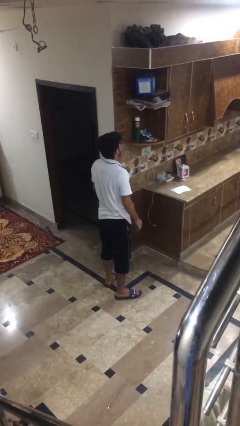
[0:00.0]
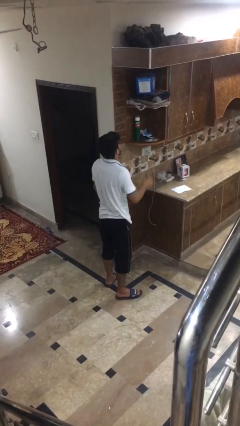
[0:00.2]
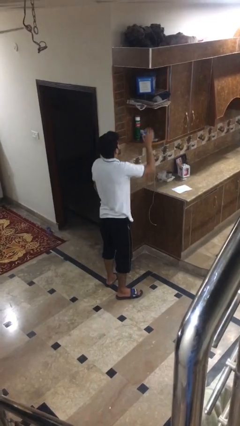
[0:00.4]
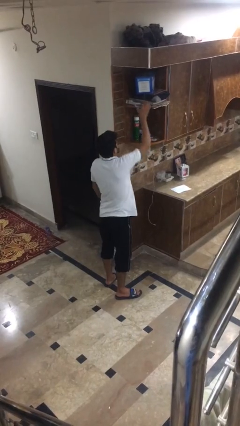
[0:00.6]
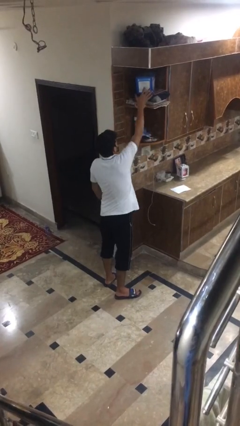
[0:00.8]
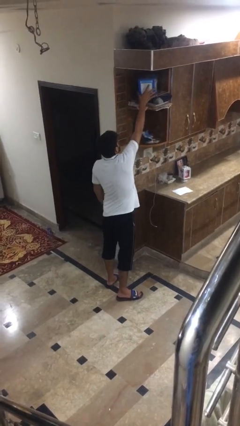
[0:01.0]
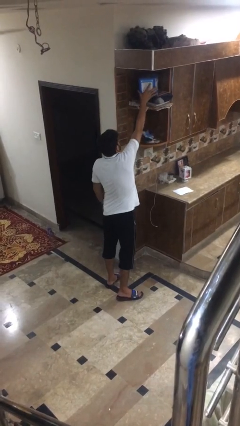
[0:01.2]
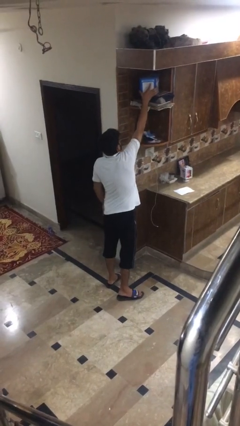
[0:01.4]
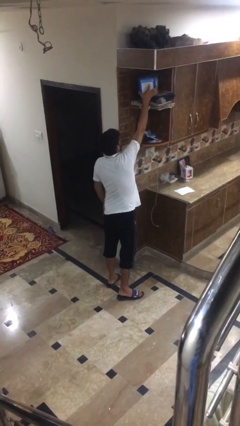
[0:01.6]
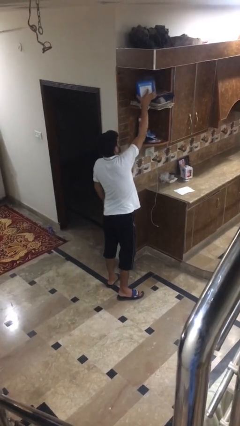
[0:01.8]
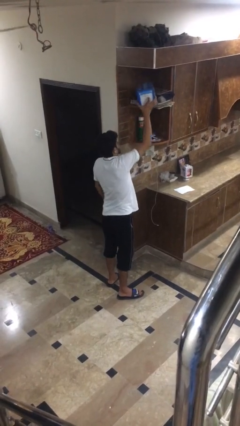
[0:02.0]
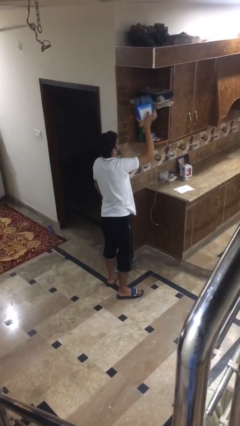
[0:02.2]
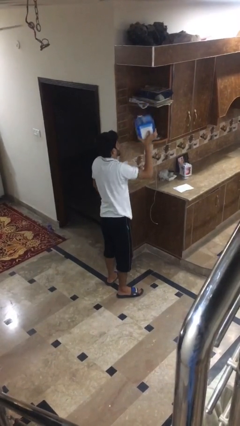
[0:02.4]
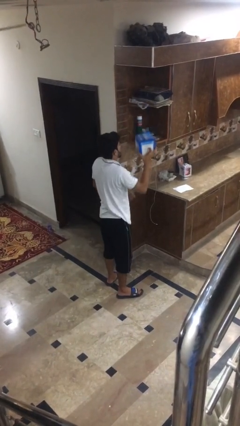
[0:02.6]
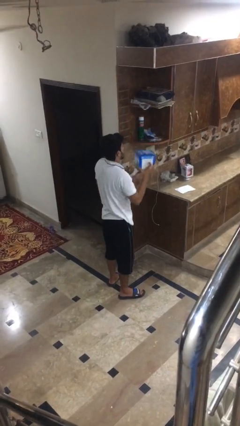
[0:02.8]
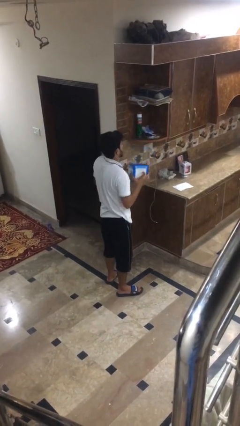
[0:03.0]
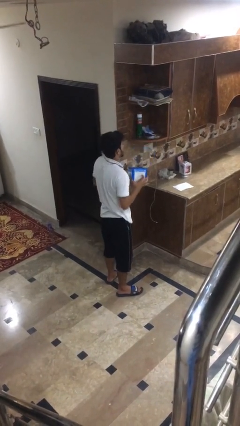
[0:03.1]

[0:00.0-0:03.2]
person puts down object on shelf

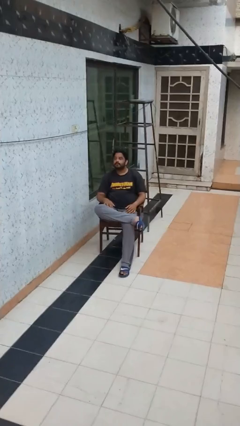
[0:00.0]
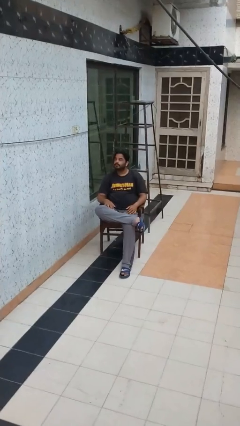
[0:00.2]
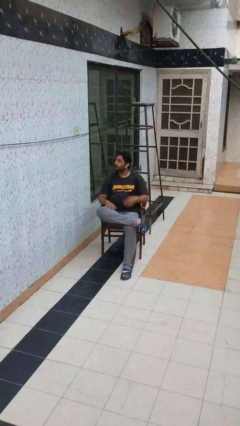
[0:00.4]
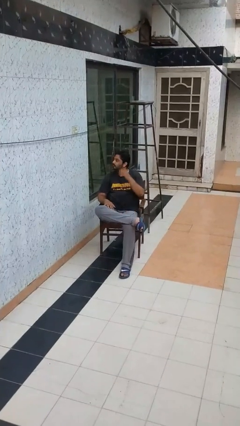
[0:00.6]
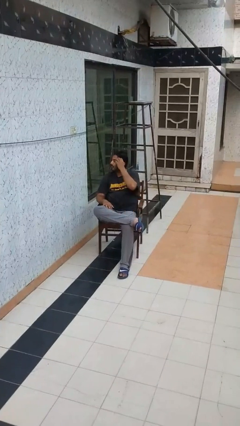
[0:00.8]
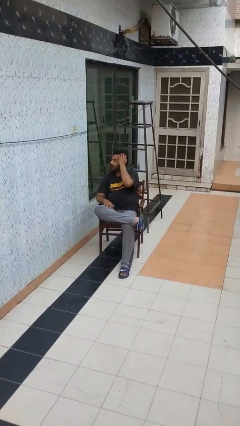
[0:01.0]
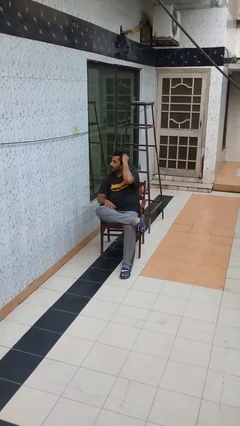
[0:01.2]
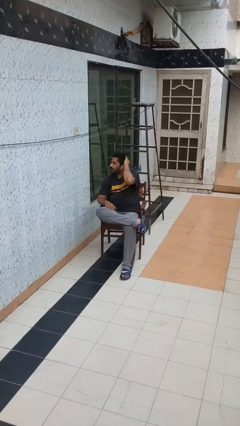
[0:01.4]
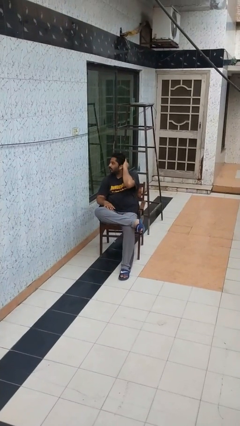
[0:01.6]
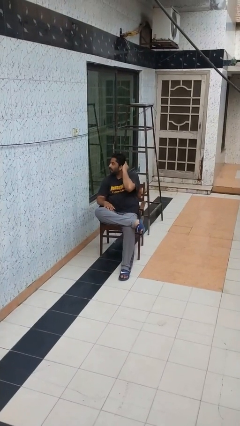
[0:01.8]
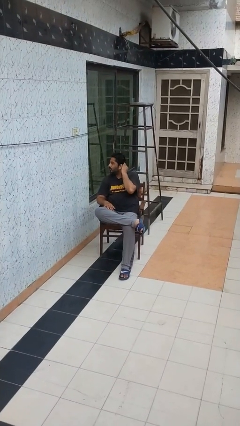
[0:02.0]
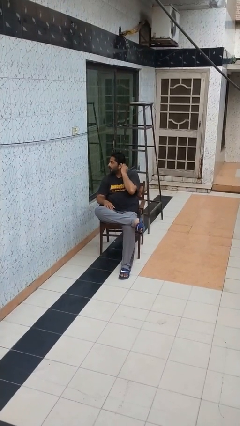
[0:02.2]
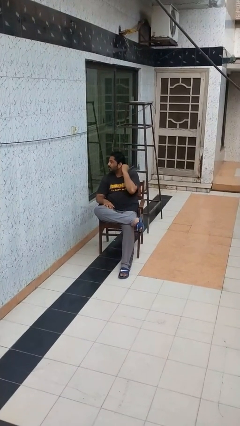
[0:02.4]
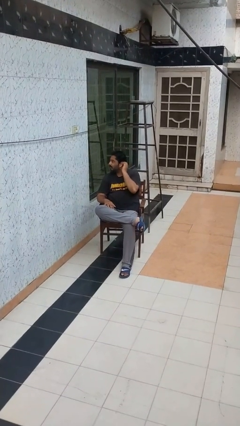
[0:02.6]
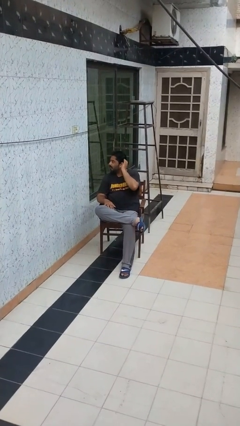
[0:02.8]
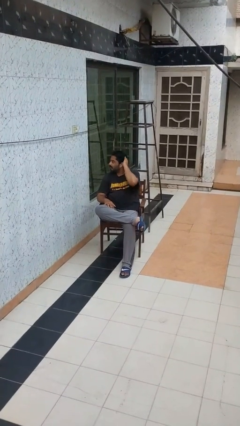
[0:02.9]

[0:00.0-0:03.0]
person strokes hair

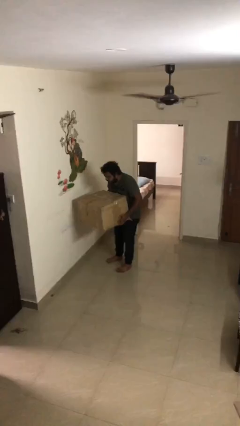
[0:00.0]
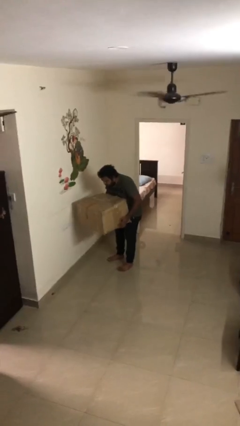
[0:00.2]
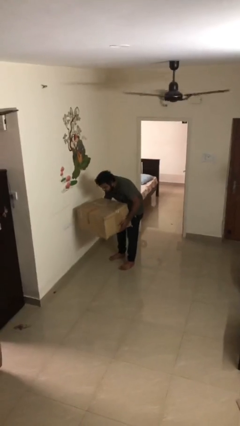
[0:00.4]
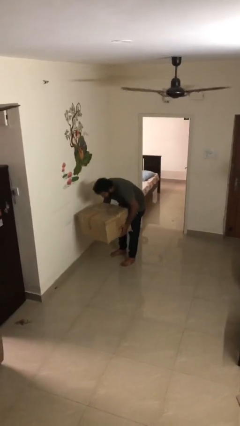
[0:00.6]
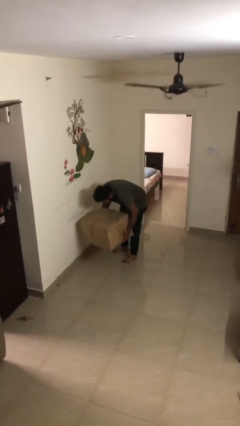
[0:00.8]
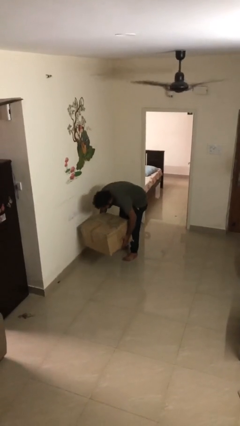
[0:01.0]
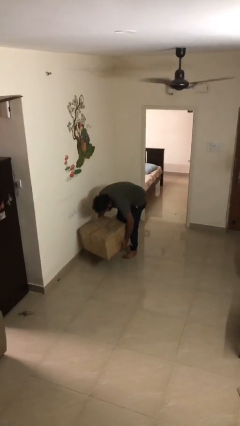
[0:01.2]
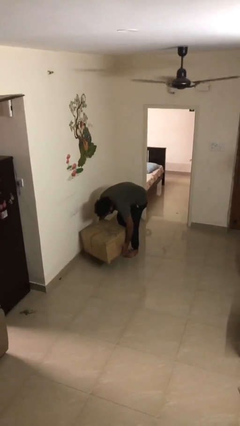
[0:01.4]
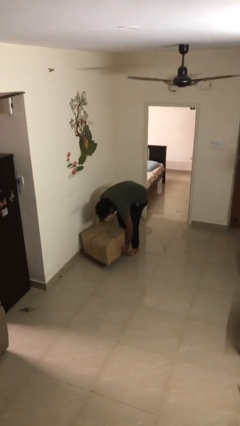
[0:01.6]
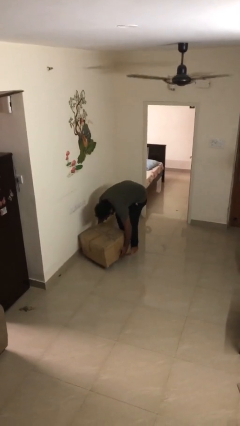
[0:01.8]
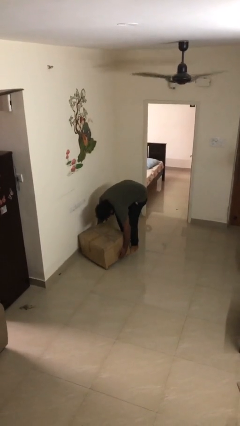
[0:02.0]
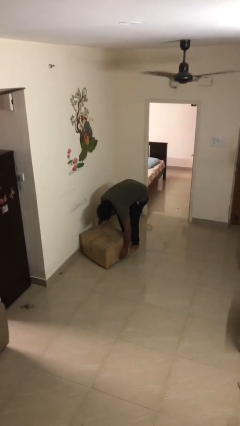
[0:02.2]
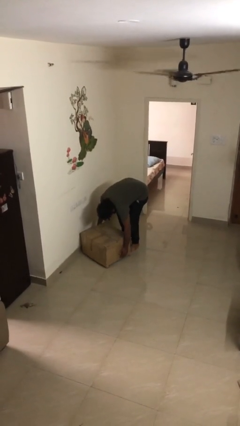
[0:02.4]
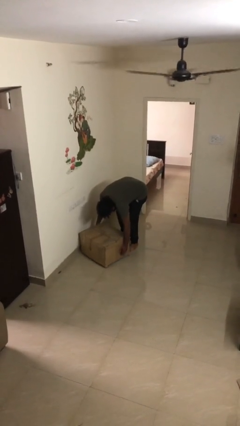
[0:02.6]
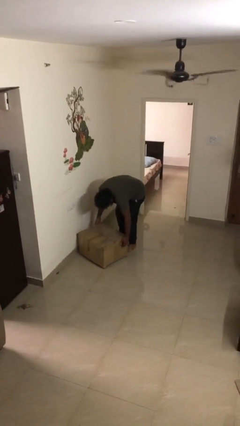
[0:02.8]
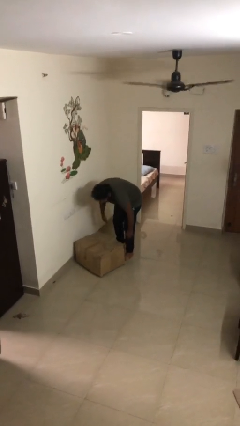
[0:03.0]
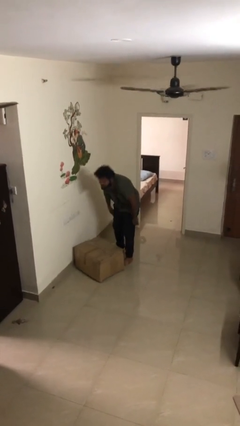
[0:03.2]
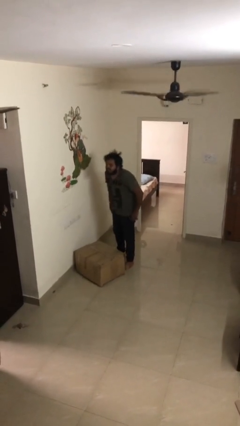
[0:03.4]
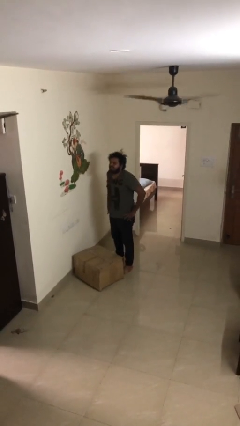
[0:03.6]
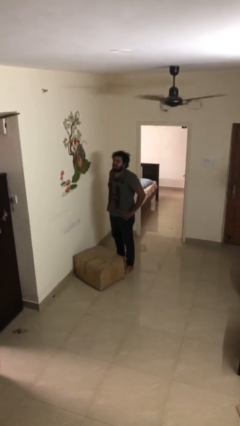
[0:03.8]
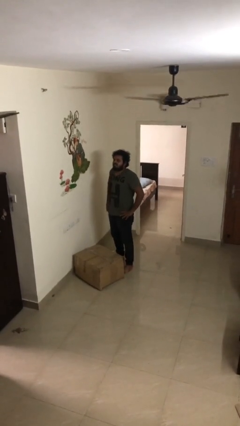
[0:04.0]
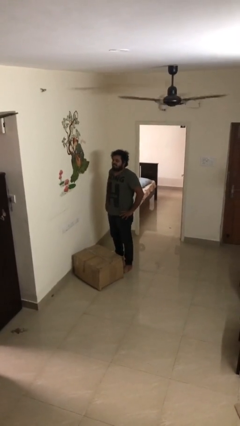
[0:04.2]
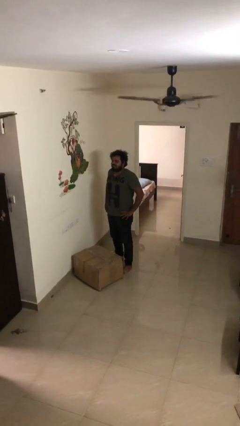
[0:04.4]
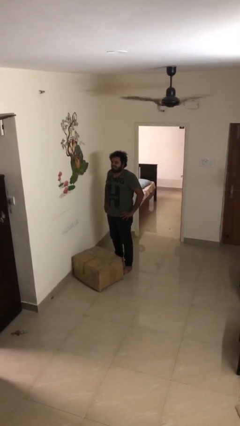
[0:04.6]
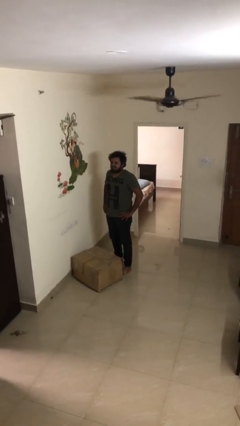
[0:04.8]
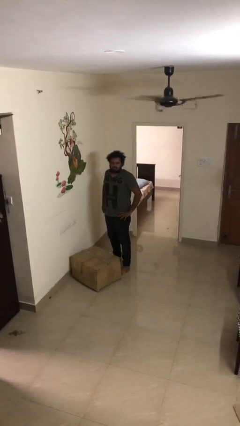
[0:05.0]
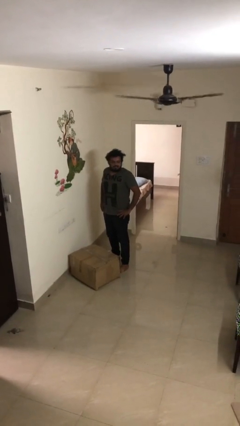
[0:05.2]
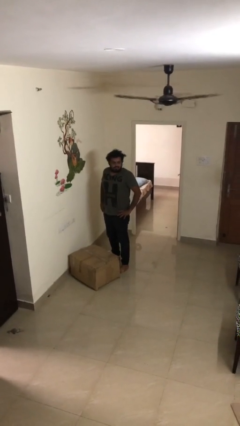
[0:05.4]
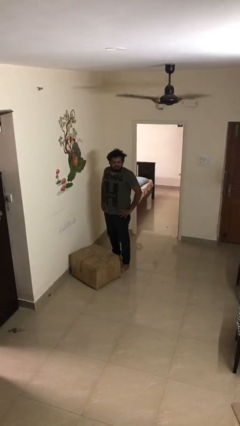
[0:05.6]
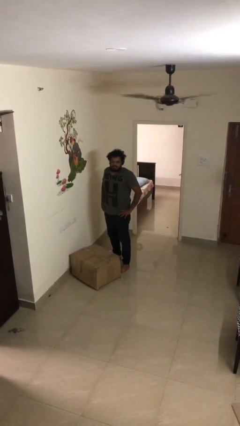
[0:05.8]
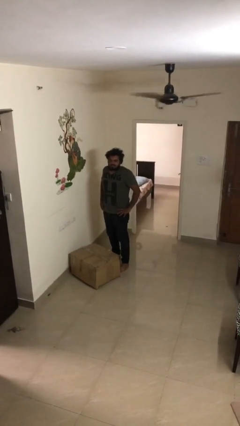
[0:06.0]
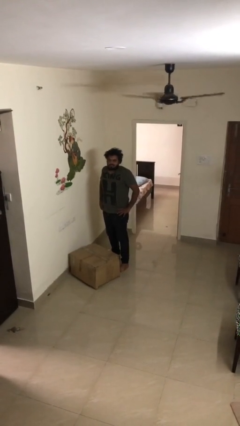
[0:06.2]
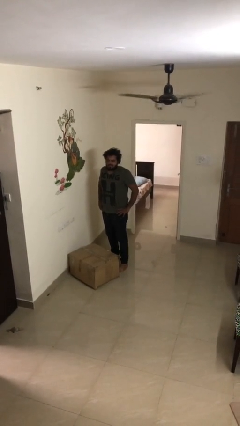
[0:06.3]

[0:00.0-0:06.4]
person puts down object on floor

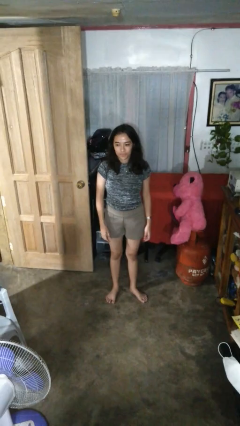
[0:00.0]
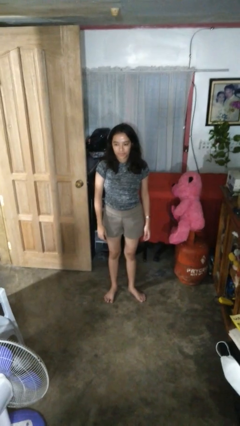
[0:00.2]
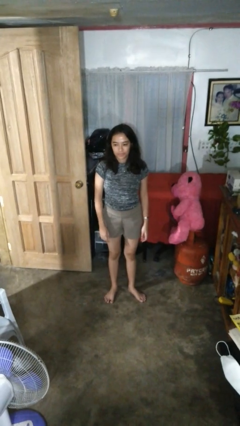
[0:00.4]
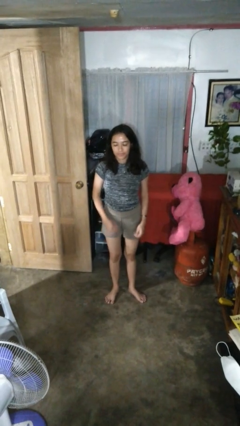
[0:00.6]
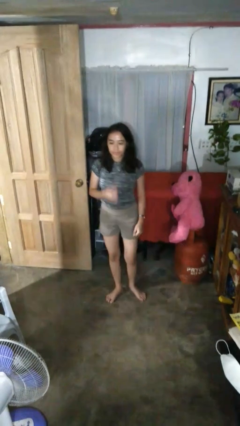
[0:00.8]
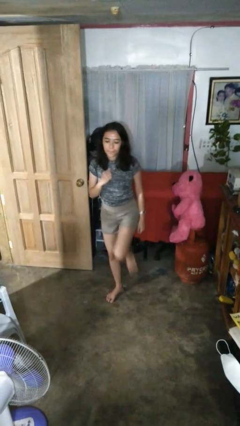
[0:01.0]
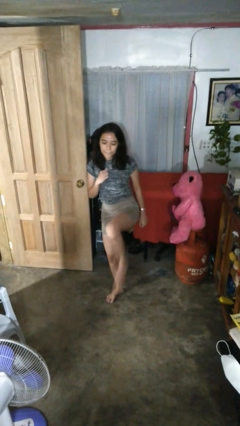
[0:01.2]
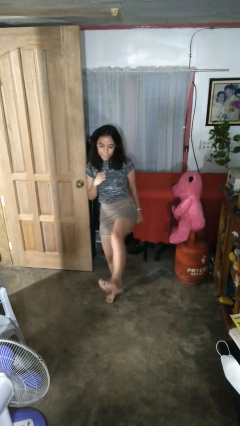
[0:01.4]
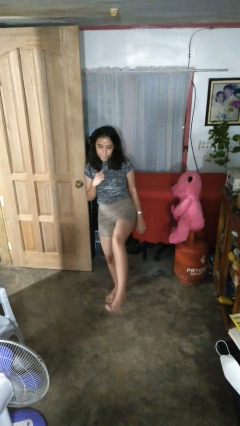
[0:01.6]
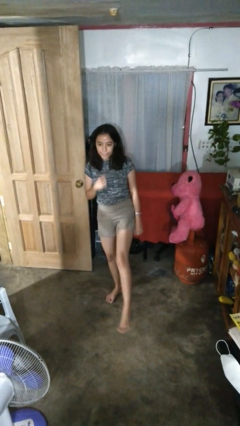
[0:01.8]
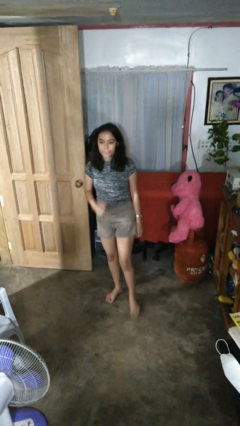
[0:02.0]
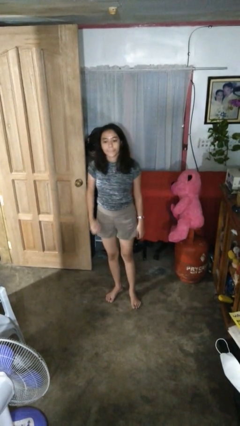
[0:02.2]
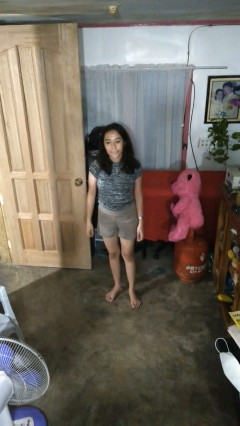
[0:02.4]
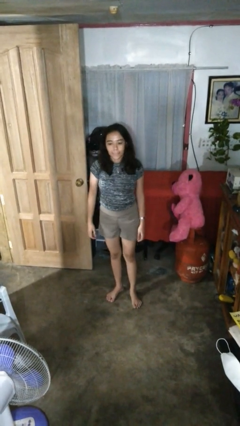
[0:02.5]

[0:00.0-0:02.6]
person karate kicks

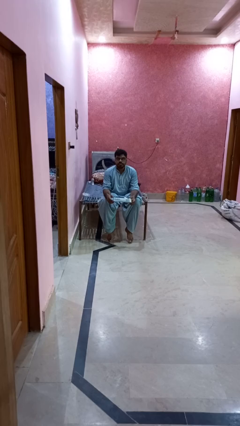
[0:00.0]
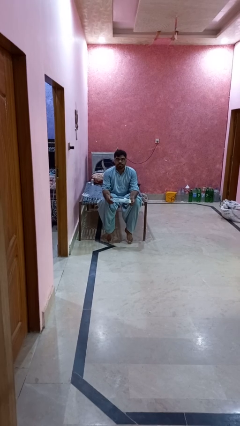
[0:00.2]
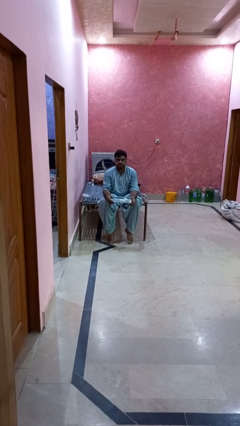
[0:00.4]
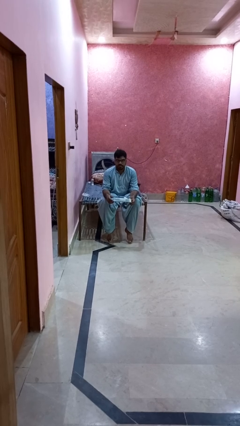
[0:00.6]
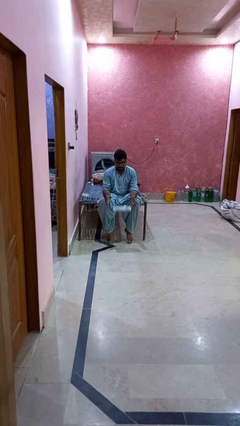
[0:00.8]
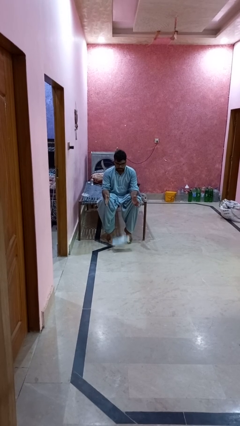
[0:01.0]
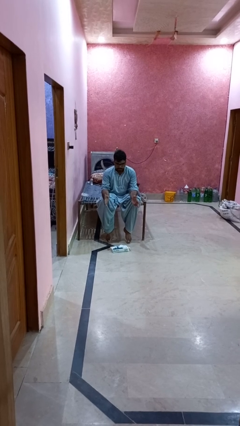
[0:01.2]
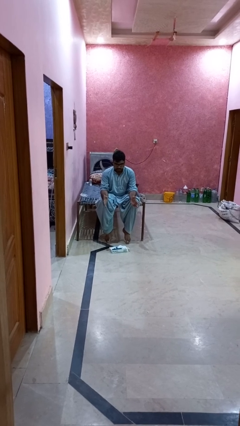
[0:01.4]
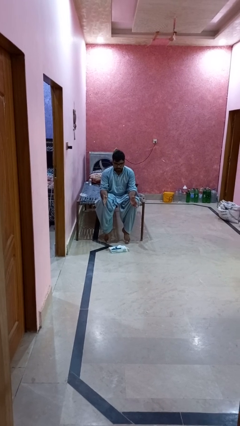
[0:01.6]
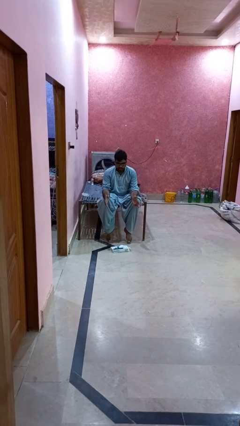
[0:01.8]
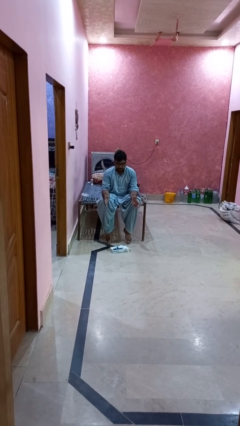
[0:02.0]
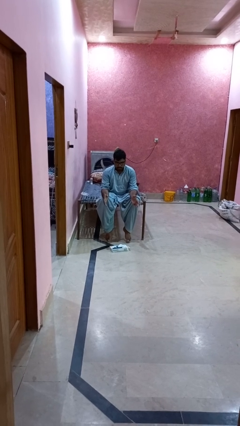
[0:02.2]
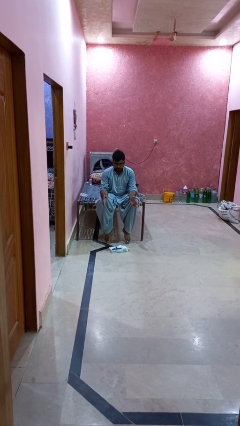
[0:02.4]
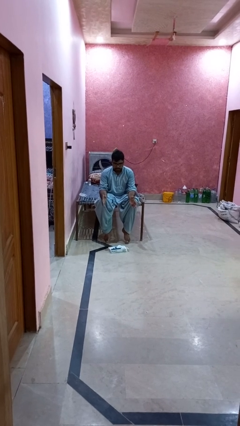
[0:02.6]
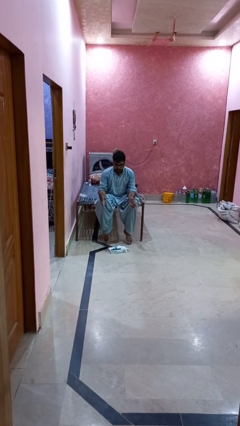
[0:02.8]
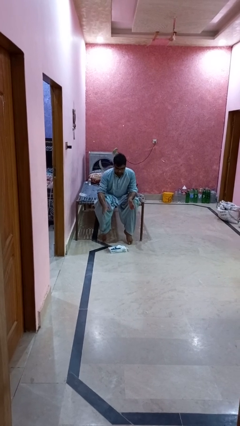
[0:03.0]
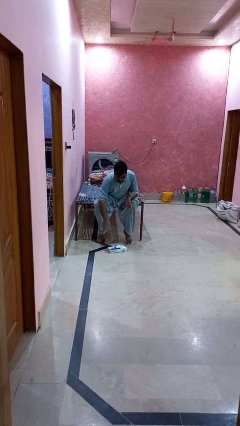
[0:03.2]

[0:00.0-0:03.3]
person drops object
